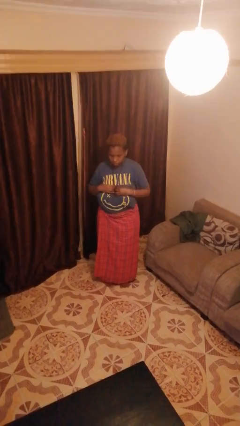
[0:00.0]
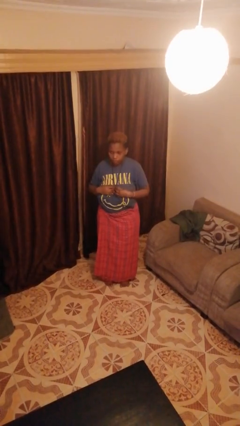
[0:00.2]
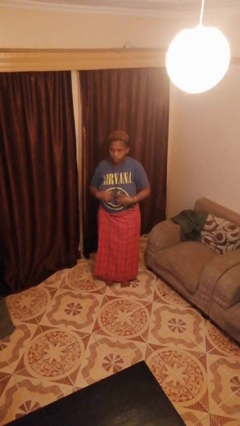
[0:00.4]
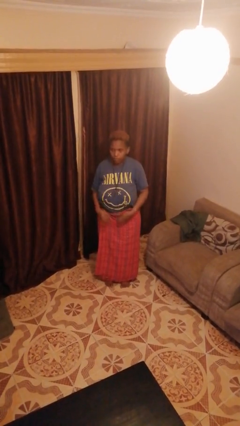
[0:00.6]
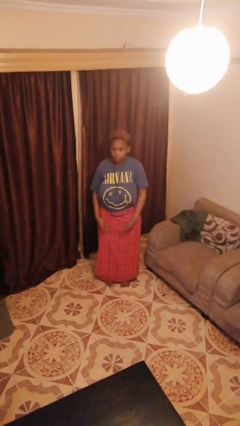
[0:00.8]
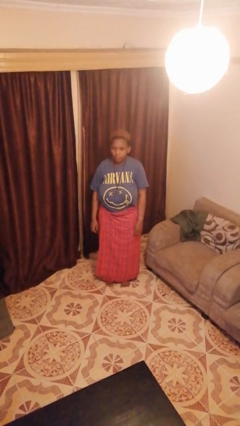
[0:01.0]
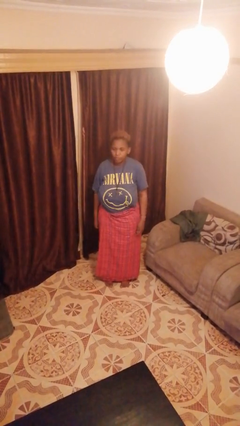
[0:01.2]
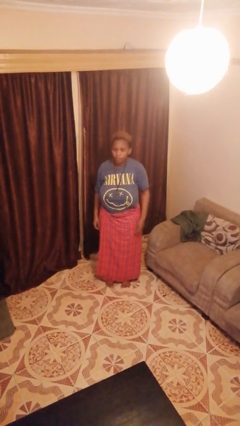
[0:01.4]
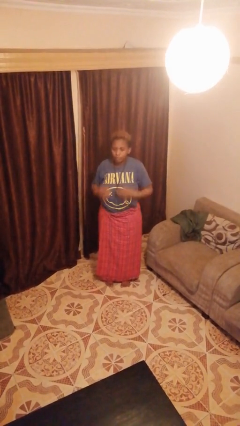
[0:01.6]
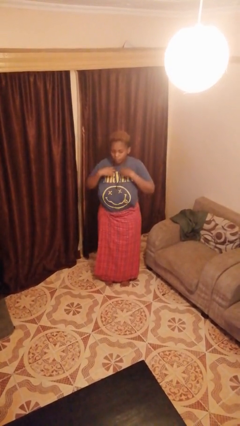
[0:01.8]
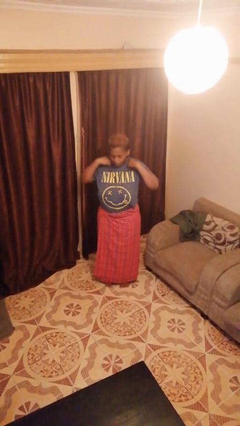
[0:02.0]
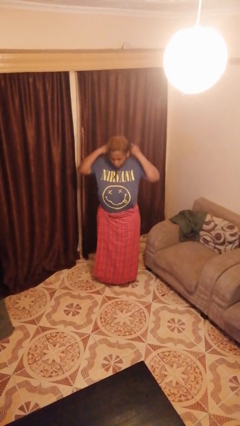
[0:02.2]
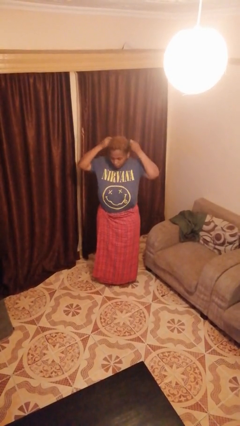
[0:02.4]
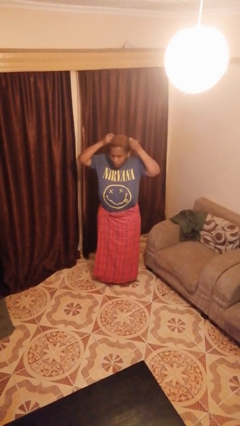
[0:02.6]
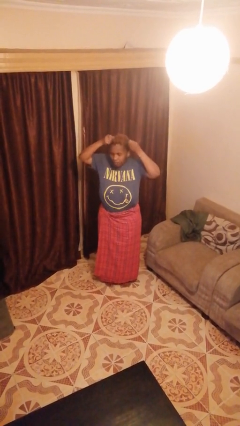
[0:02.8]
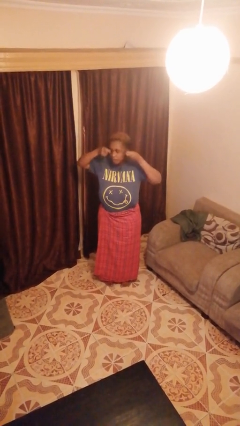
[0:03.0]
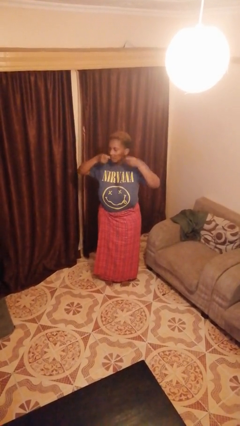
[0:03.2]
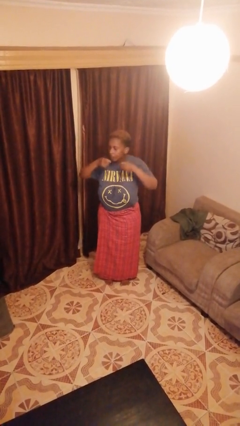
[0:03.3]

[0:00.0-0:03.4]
person takes off necklace

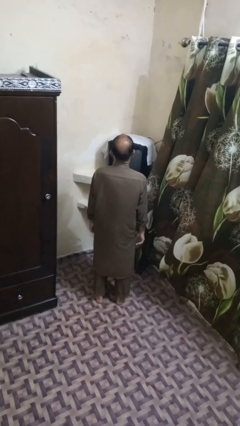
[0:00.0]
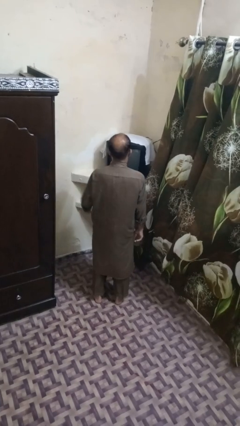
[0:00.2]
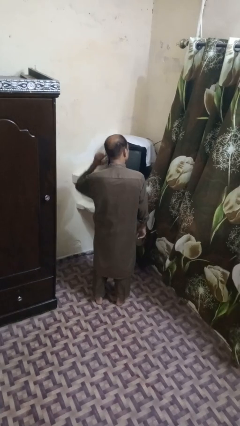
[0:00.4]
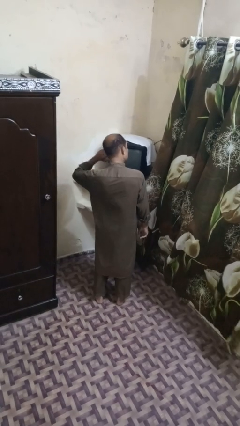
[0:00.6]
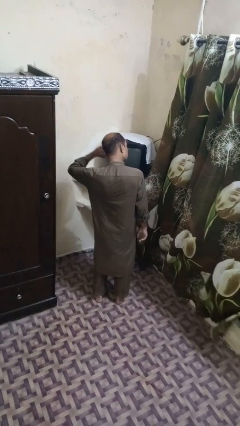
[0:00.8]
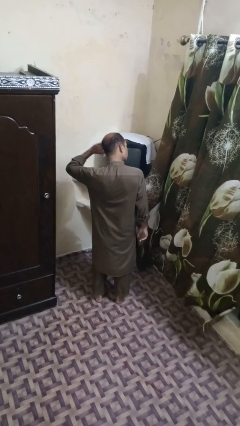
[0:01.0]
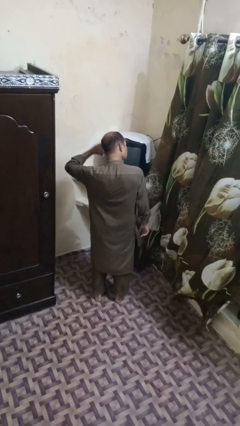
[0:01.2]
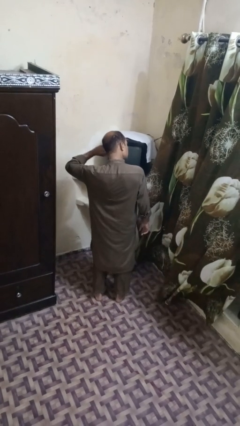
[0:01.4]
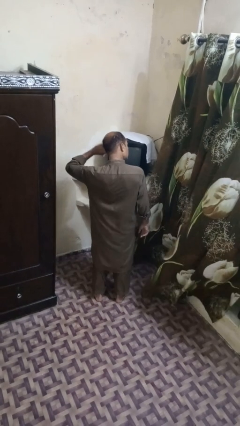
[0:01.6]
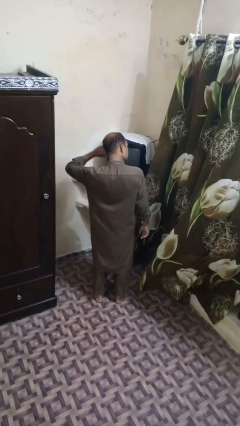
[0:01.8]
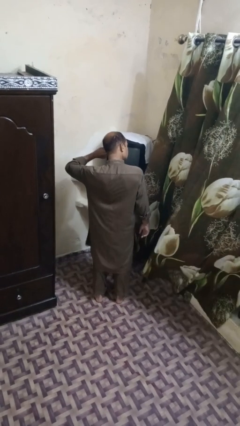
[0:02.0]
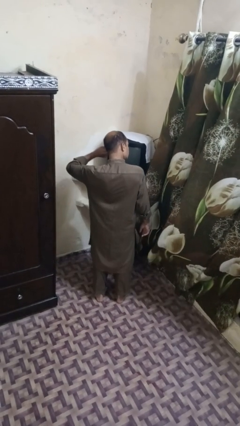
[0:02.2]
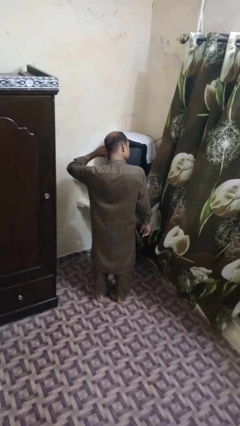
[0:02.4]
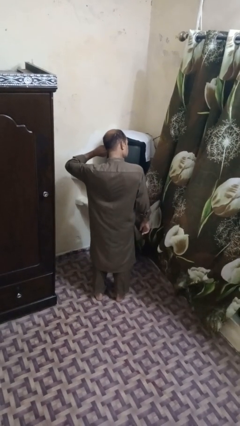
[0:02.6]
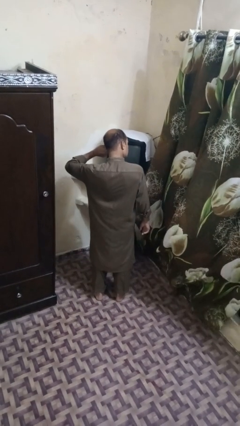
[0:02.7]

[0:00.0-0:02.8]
person puts fingers in ear

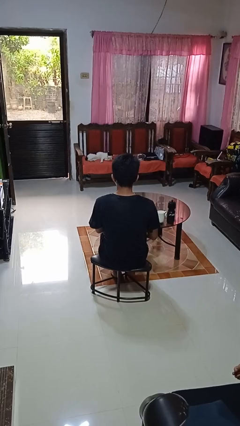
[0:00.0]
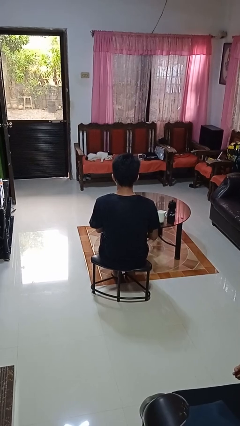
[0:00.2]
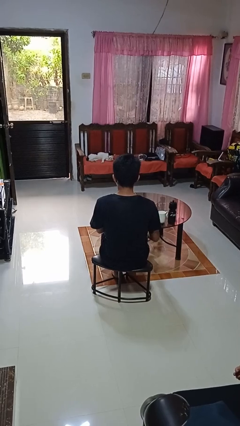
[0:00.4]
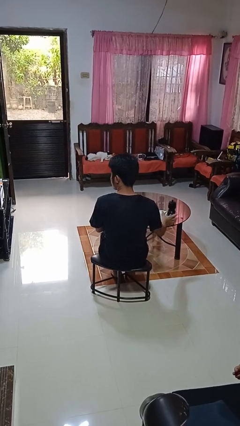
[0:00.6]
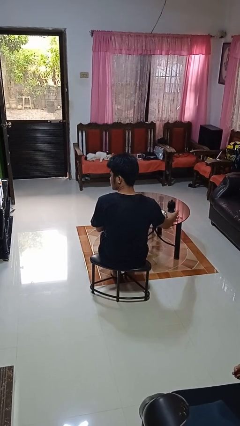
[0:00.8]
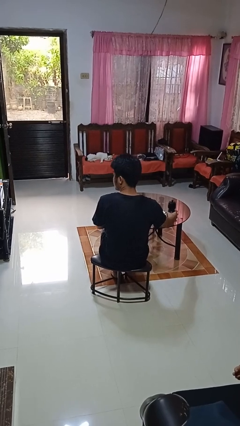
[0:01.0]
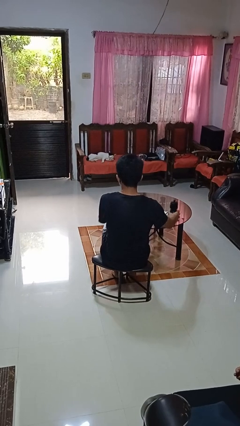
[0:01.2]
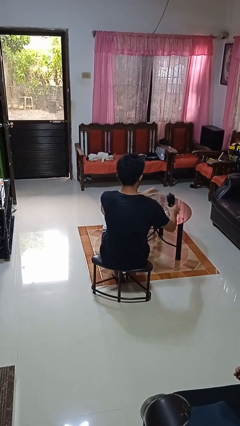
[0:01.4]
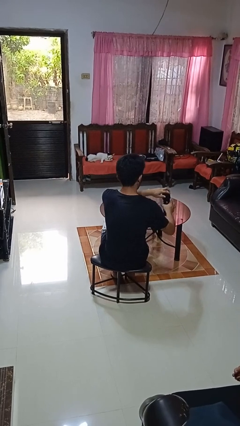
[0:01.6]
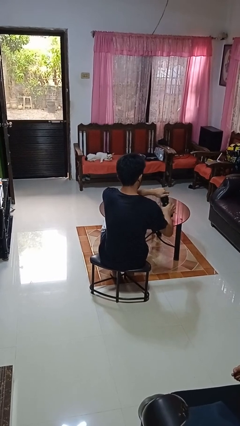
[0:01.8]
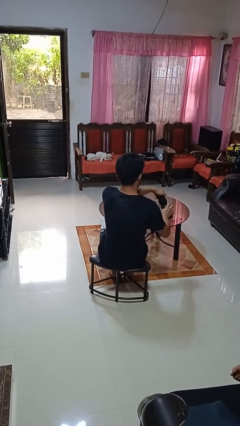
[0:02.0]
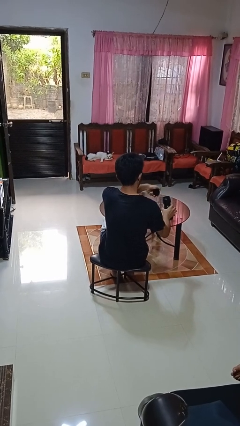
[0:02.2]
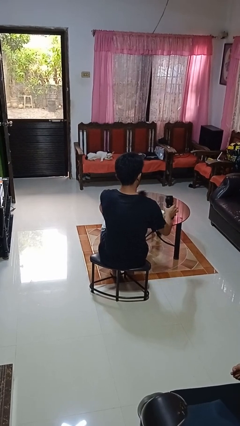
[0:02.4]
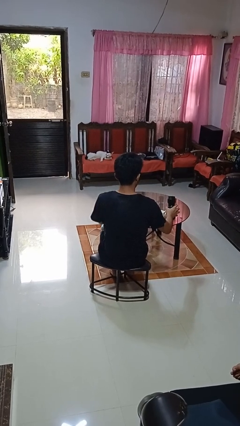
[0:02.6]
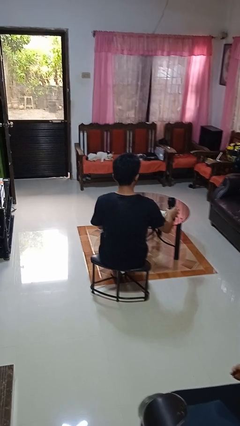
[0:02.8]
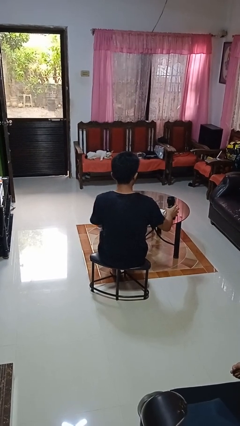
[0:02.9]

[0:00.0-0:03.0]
person unscrews lid from bottle

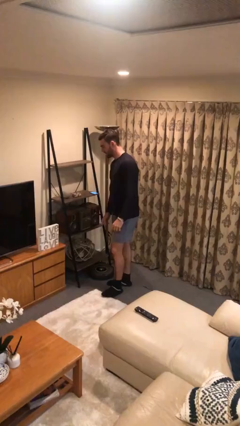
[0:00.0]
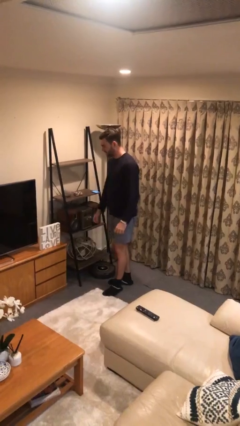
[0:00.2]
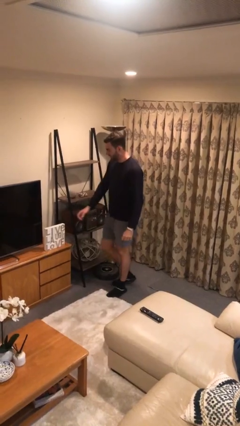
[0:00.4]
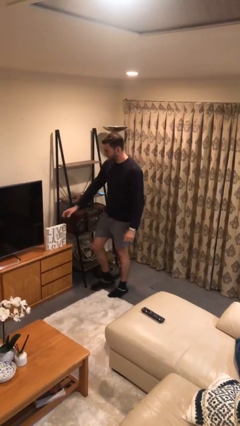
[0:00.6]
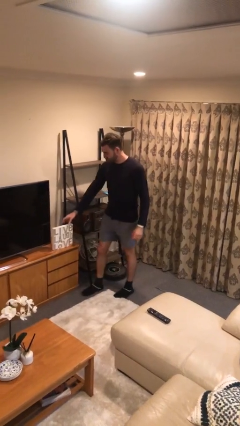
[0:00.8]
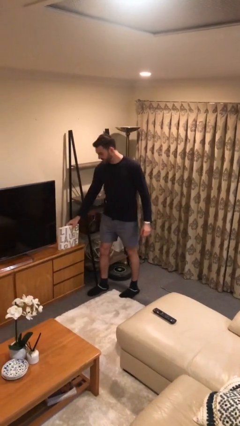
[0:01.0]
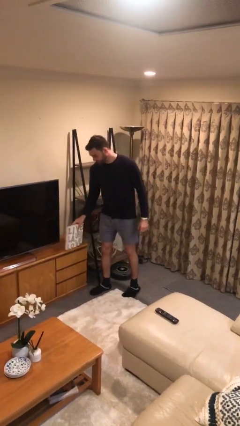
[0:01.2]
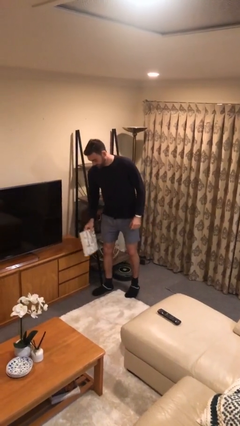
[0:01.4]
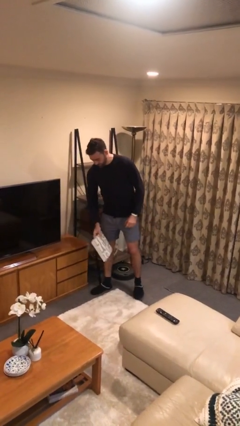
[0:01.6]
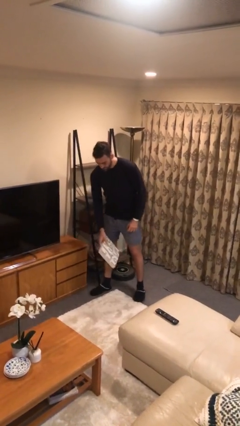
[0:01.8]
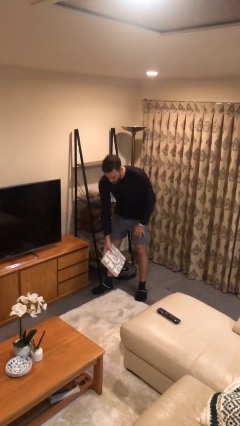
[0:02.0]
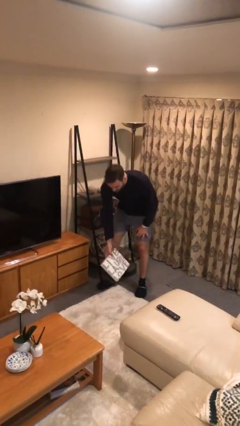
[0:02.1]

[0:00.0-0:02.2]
person picks up object from table

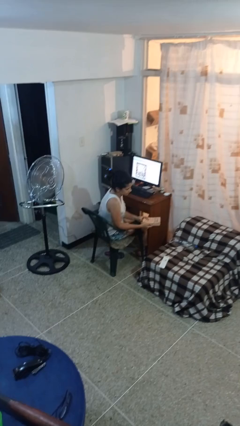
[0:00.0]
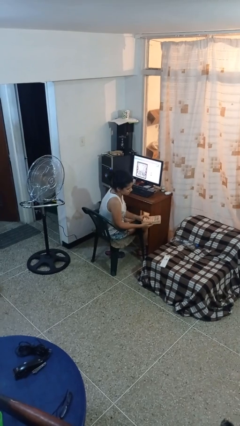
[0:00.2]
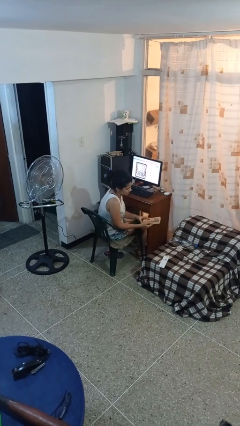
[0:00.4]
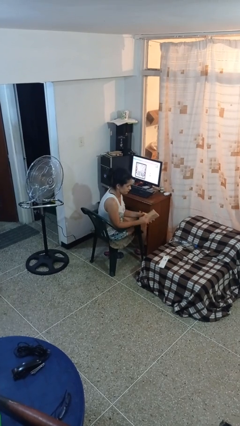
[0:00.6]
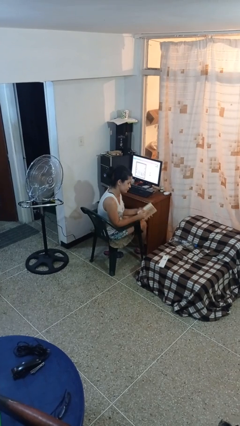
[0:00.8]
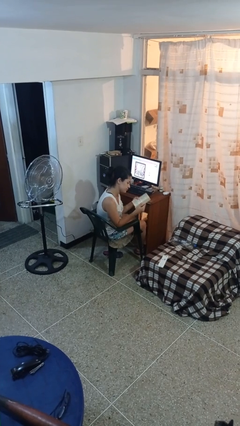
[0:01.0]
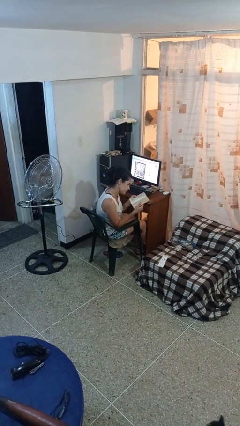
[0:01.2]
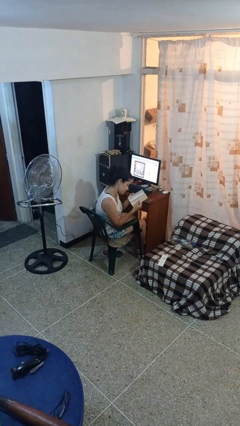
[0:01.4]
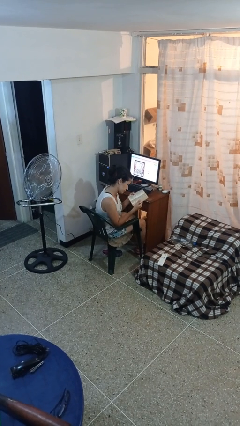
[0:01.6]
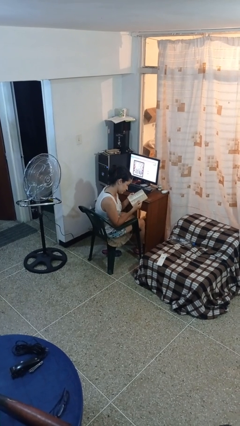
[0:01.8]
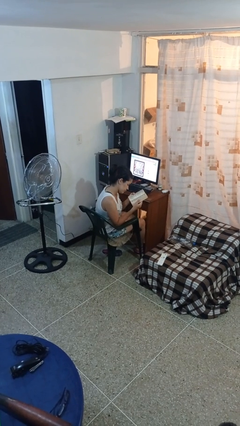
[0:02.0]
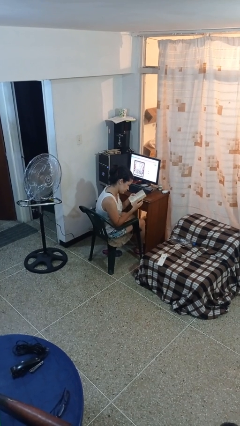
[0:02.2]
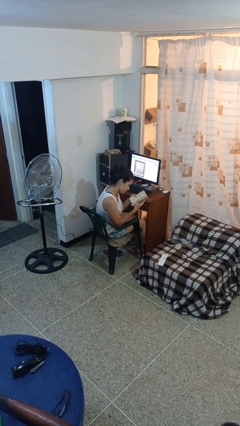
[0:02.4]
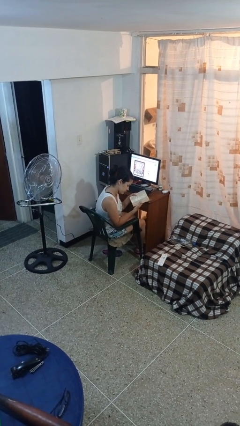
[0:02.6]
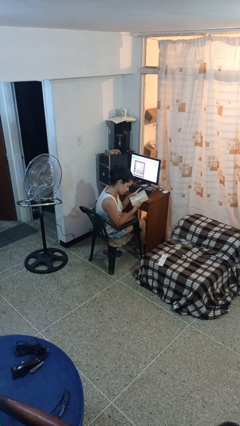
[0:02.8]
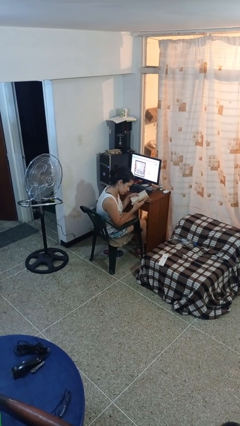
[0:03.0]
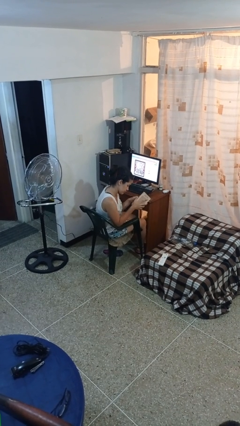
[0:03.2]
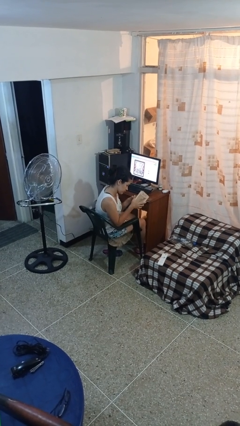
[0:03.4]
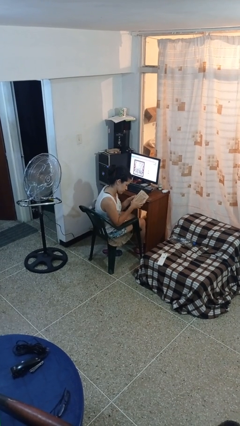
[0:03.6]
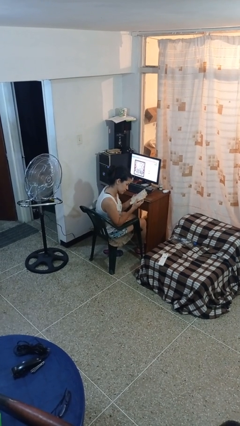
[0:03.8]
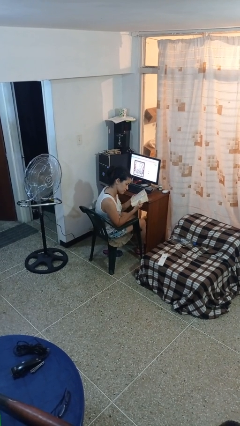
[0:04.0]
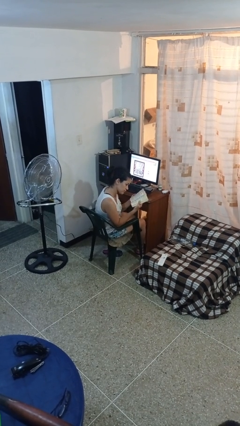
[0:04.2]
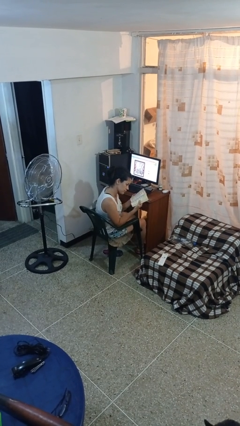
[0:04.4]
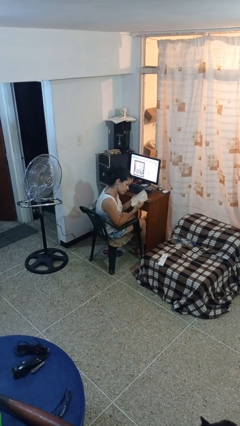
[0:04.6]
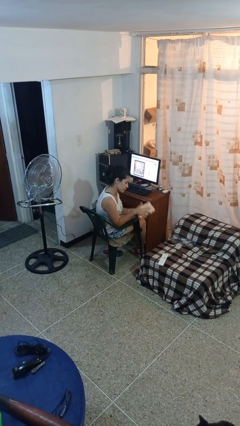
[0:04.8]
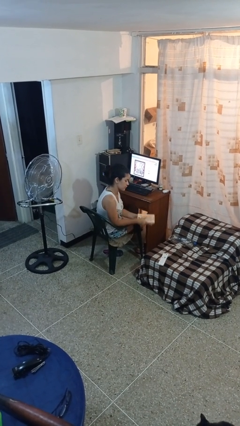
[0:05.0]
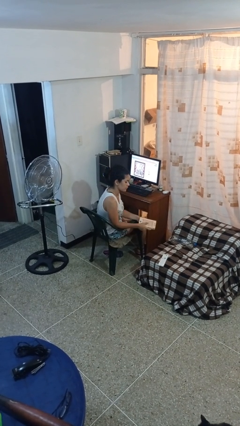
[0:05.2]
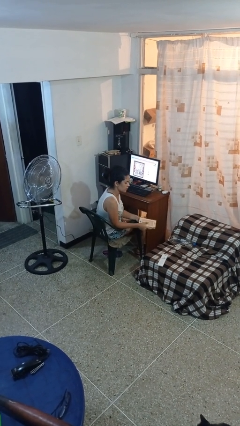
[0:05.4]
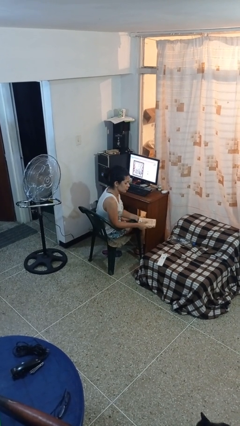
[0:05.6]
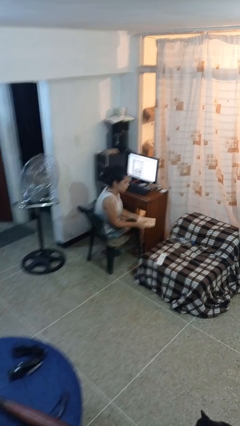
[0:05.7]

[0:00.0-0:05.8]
person reads book

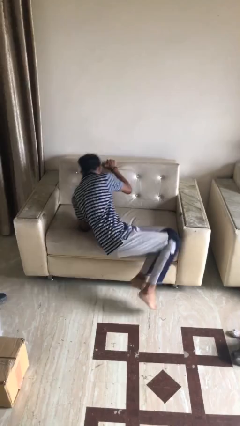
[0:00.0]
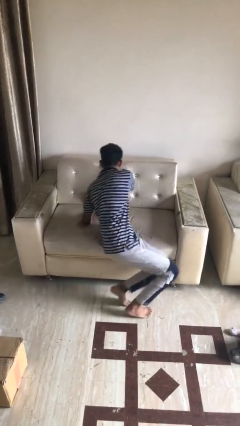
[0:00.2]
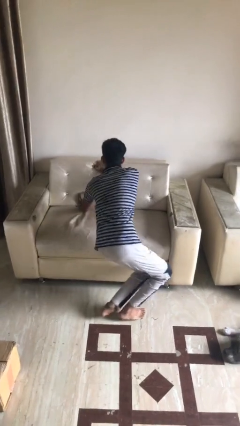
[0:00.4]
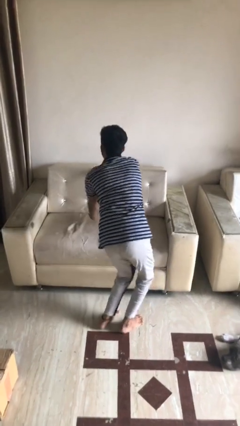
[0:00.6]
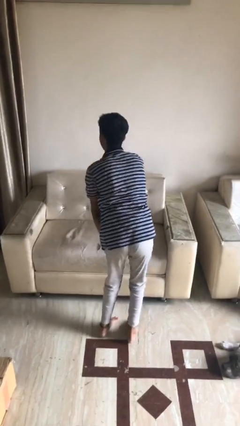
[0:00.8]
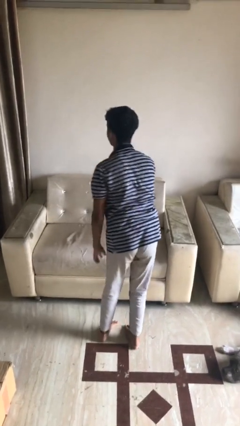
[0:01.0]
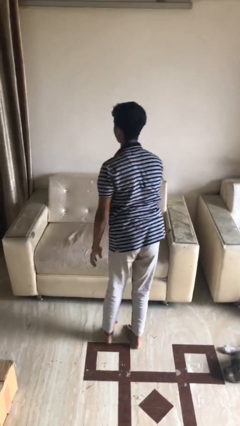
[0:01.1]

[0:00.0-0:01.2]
person stands up
